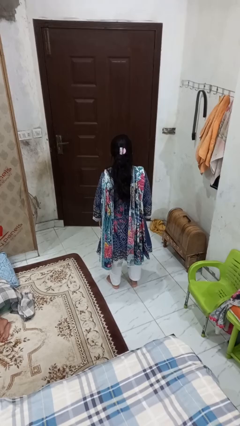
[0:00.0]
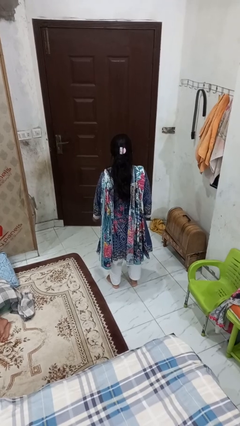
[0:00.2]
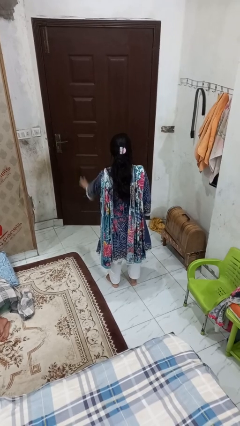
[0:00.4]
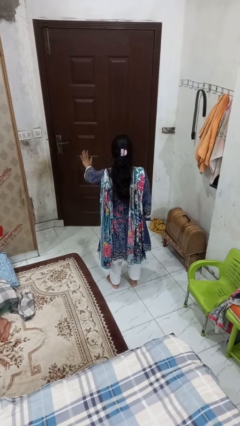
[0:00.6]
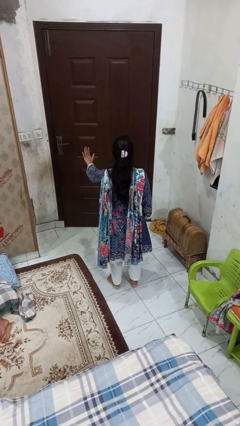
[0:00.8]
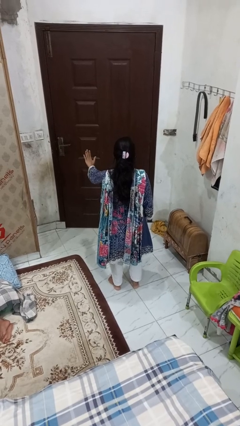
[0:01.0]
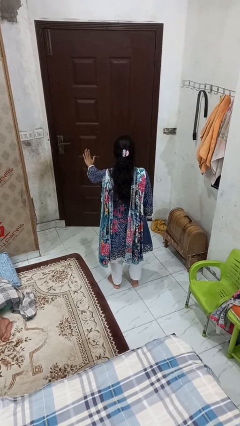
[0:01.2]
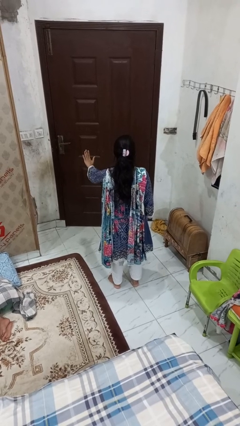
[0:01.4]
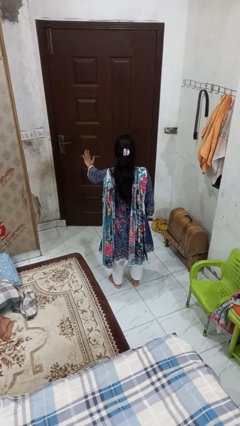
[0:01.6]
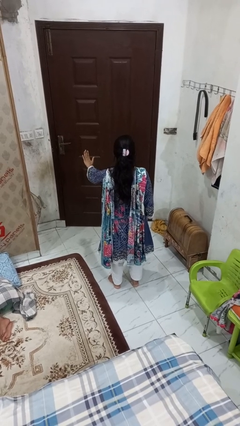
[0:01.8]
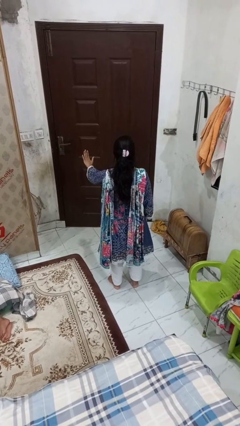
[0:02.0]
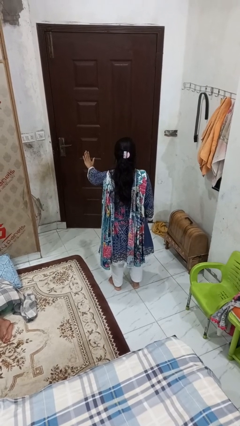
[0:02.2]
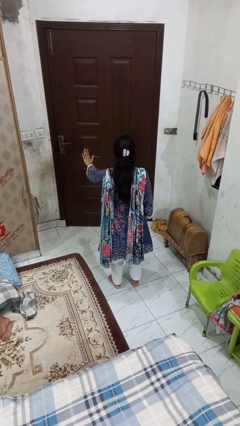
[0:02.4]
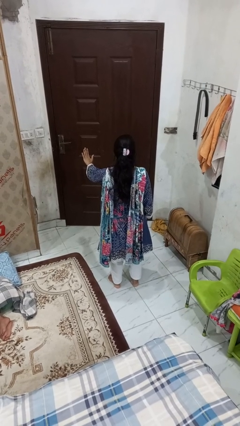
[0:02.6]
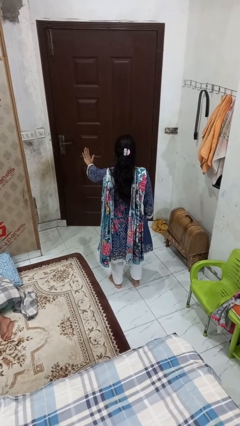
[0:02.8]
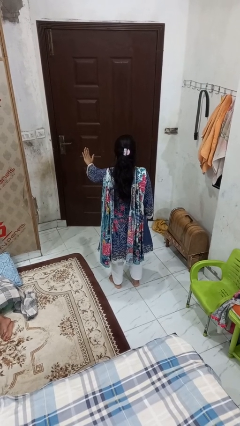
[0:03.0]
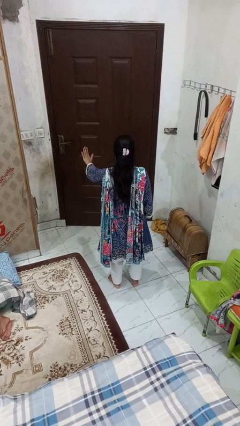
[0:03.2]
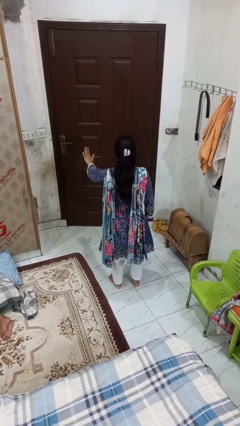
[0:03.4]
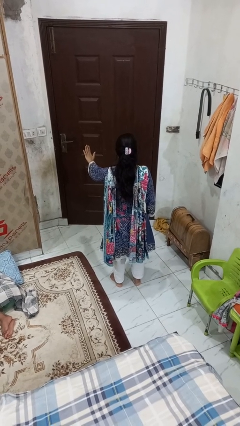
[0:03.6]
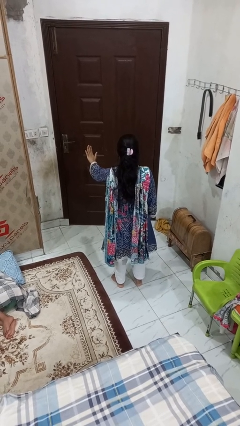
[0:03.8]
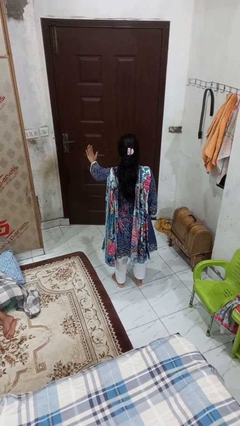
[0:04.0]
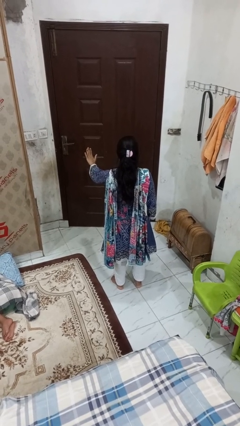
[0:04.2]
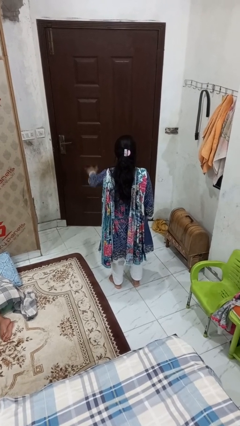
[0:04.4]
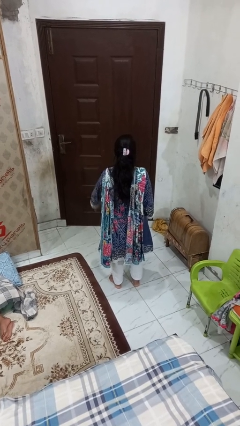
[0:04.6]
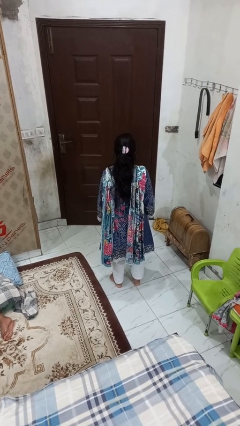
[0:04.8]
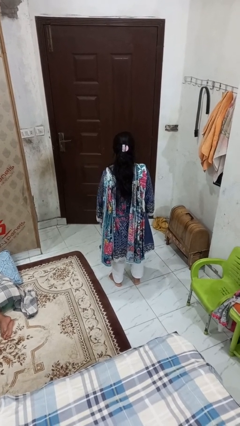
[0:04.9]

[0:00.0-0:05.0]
person gestures stop

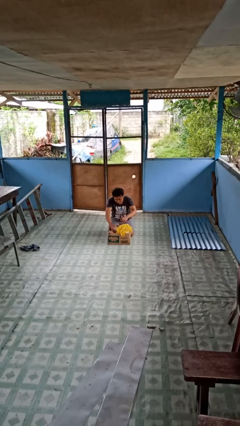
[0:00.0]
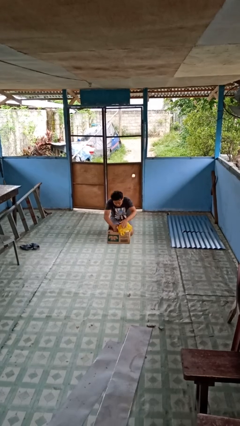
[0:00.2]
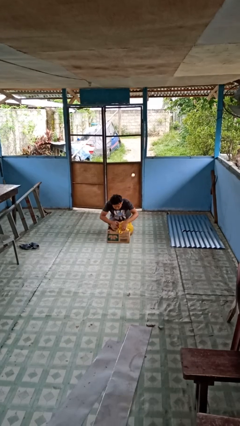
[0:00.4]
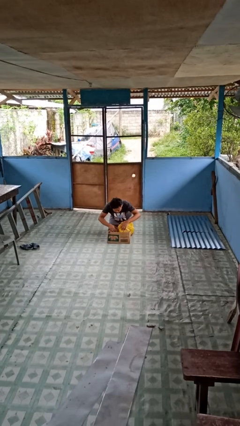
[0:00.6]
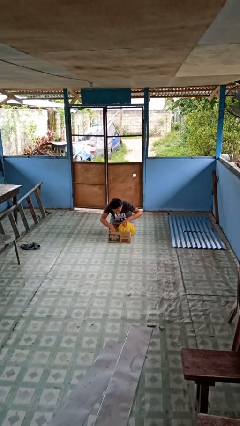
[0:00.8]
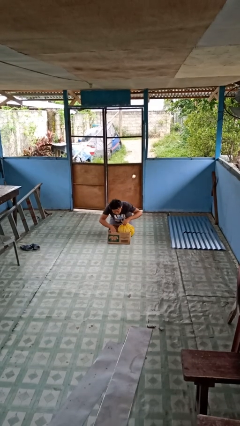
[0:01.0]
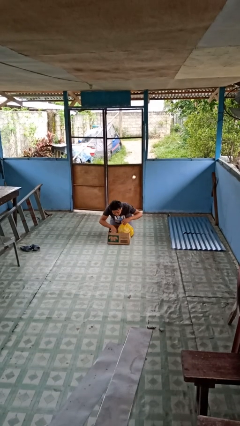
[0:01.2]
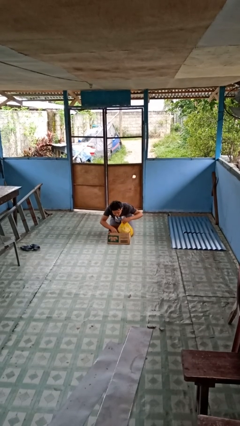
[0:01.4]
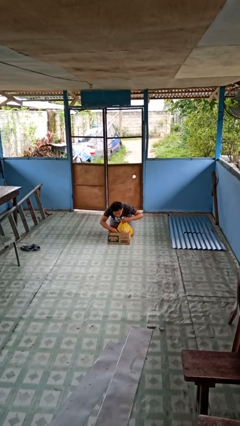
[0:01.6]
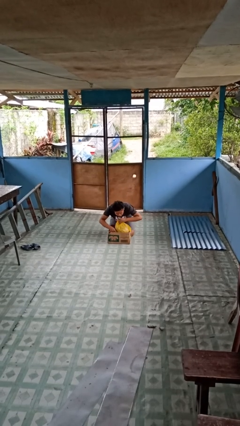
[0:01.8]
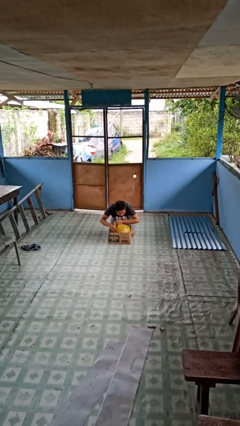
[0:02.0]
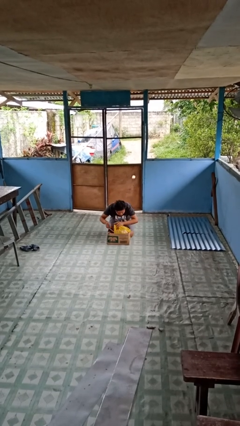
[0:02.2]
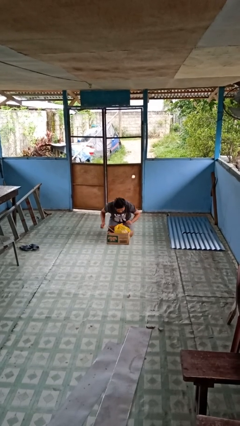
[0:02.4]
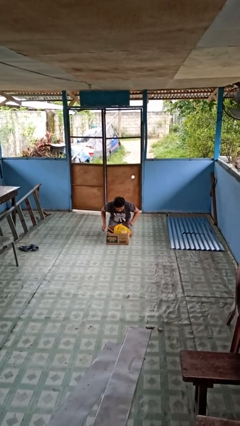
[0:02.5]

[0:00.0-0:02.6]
person searches in box

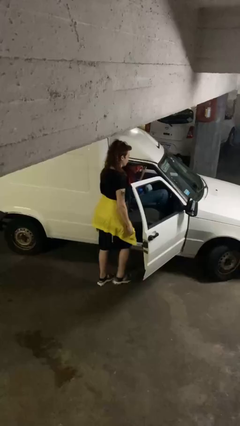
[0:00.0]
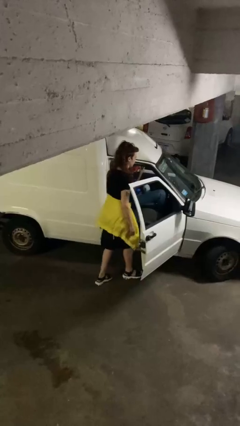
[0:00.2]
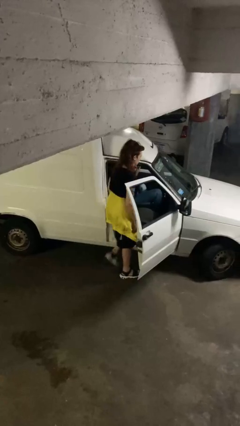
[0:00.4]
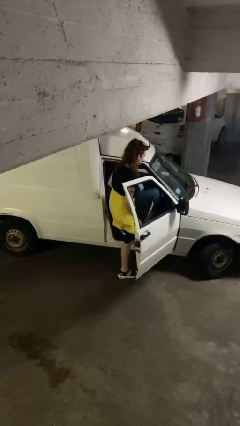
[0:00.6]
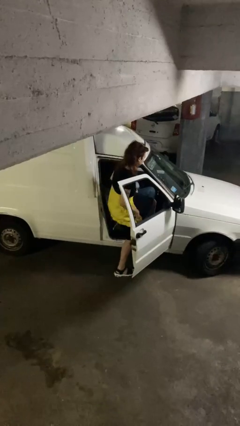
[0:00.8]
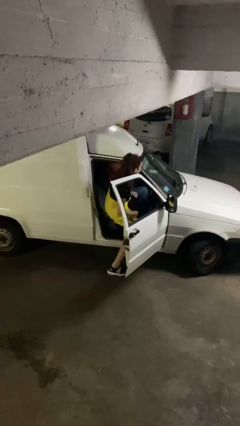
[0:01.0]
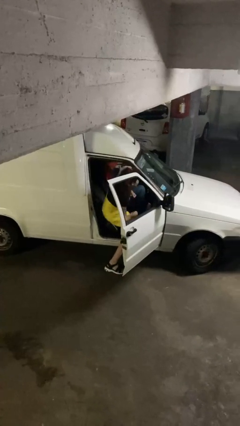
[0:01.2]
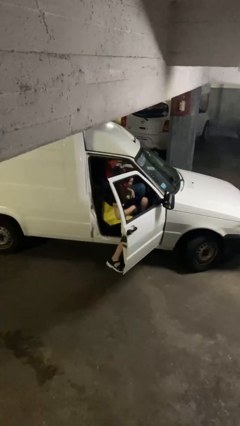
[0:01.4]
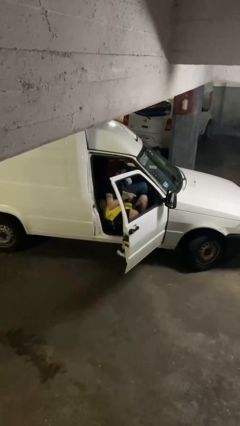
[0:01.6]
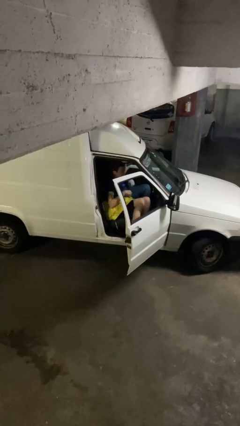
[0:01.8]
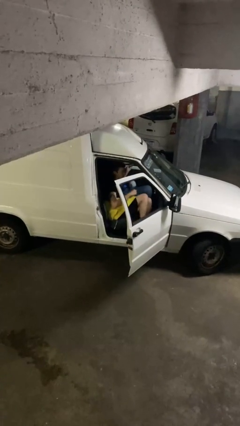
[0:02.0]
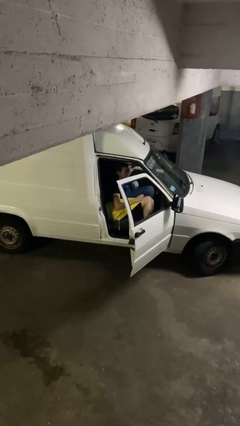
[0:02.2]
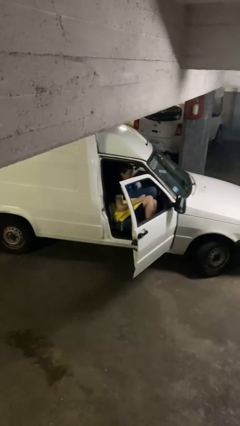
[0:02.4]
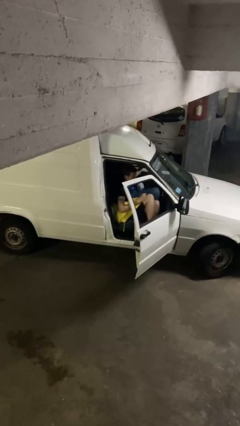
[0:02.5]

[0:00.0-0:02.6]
person enters car

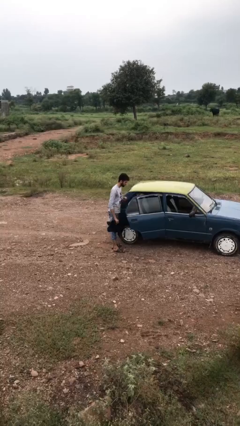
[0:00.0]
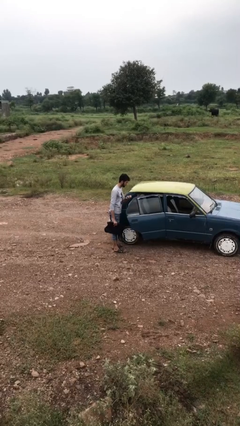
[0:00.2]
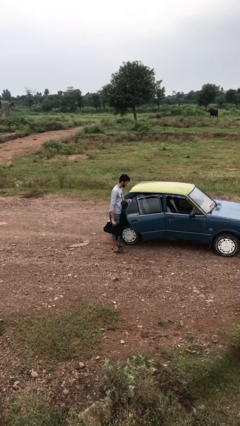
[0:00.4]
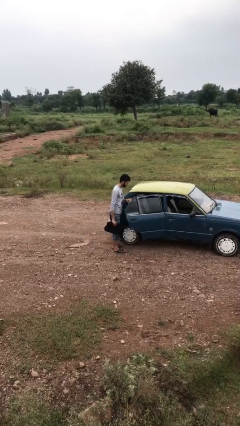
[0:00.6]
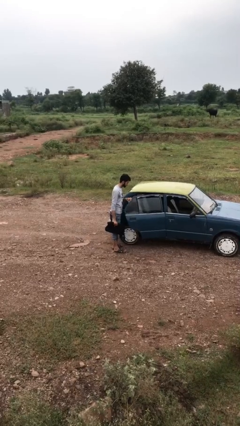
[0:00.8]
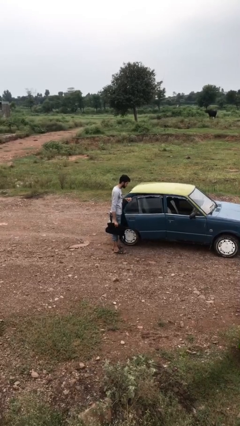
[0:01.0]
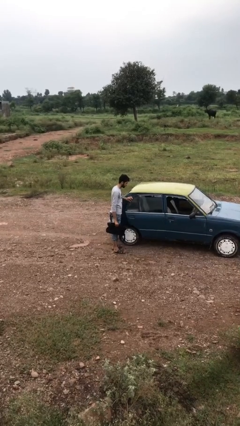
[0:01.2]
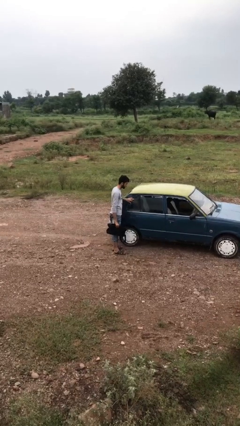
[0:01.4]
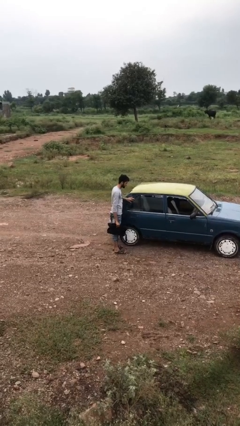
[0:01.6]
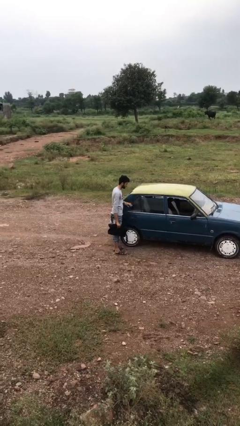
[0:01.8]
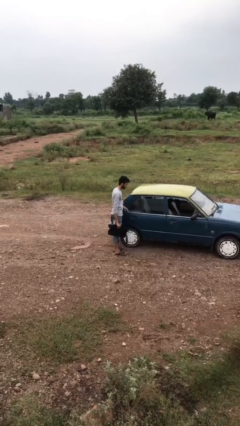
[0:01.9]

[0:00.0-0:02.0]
person closes car door

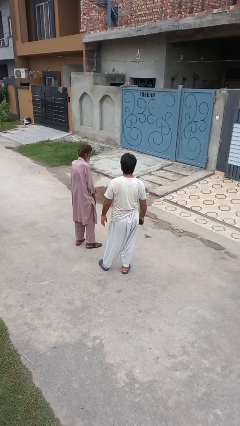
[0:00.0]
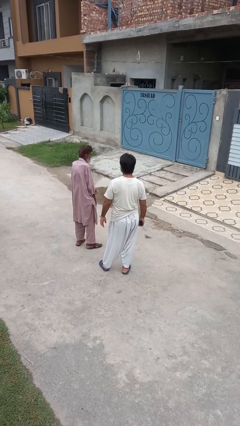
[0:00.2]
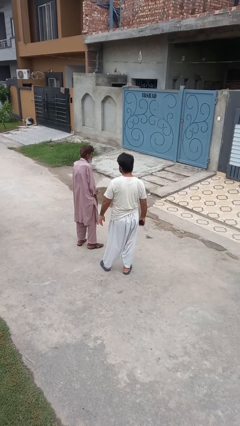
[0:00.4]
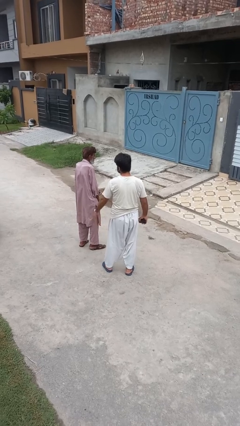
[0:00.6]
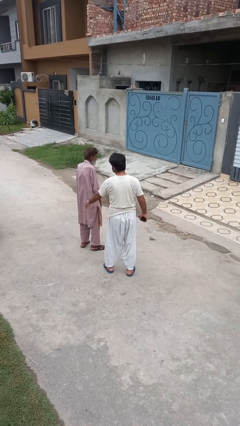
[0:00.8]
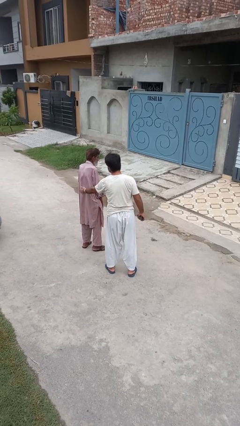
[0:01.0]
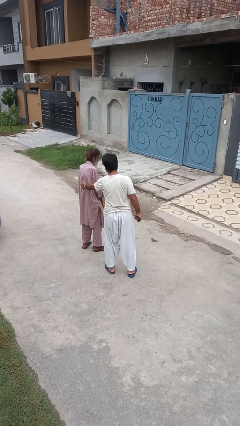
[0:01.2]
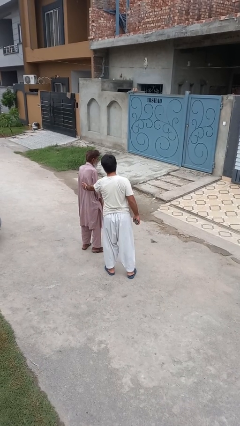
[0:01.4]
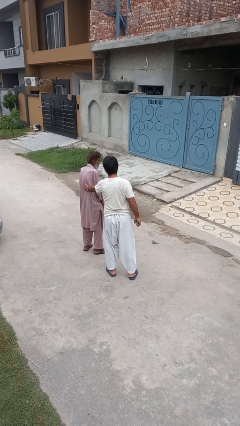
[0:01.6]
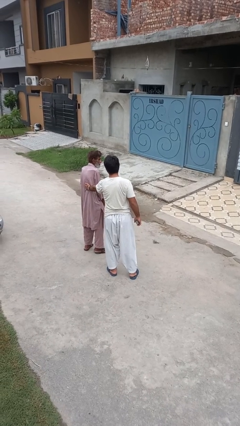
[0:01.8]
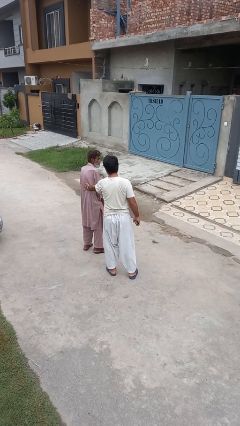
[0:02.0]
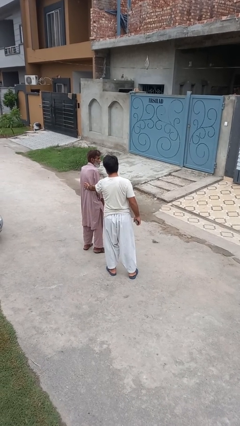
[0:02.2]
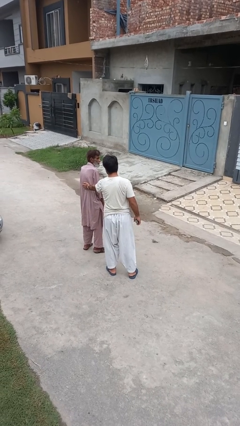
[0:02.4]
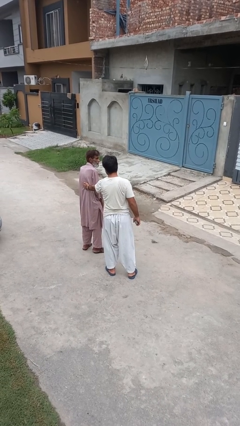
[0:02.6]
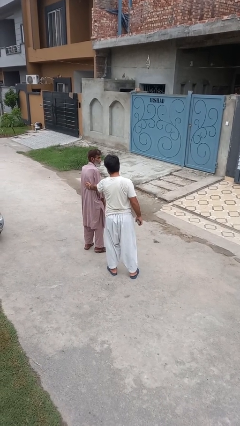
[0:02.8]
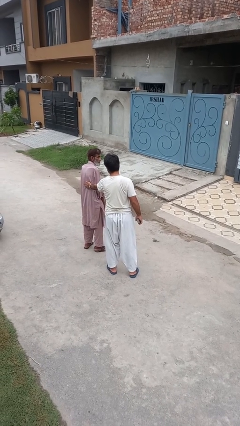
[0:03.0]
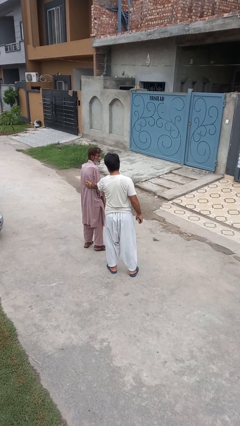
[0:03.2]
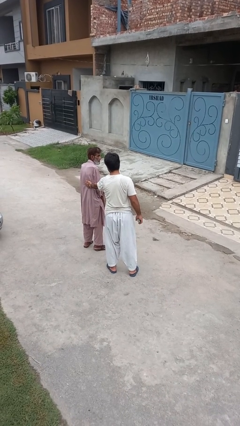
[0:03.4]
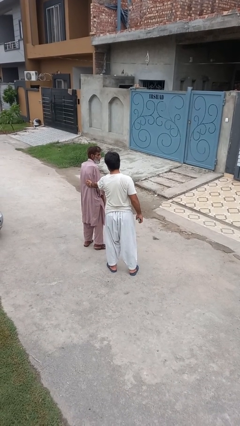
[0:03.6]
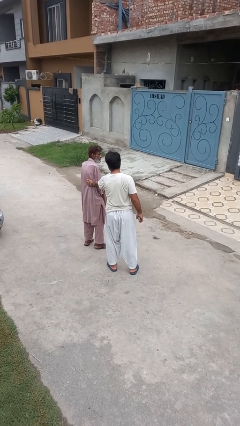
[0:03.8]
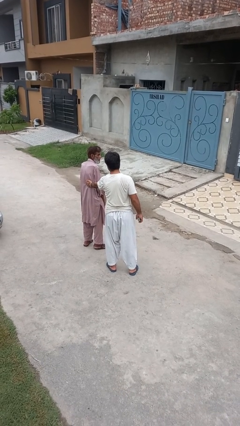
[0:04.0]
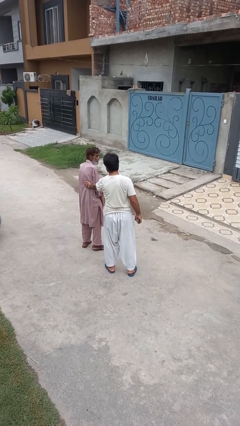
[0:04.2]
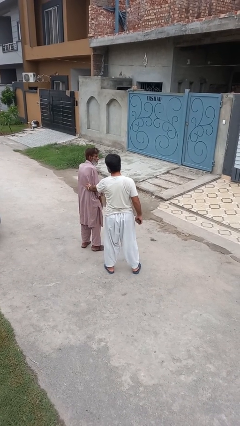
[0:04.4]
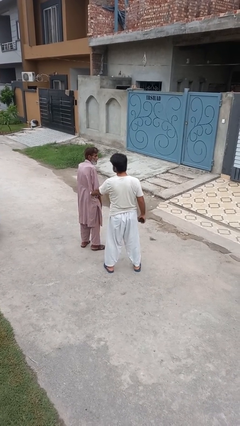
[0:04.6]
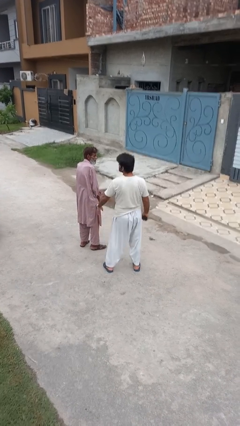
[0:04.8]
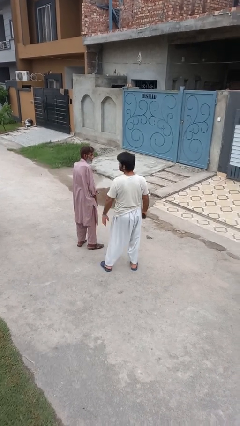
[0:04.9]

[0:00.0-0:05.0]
person touches back of person
